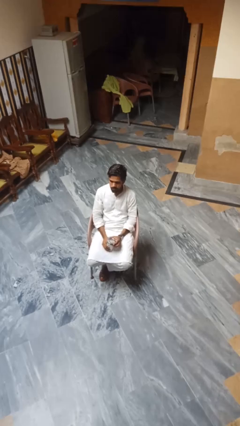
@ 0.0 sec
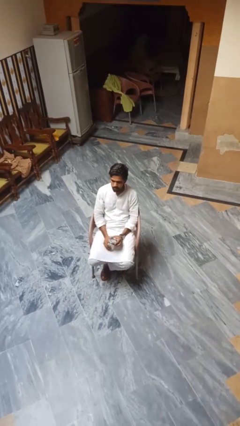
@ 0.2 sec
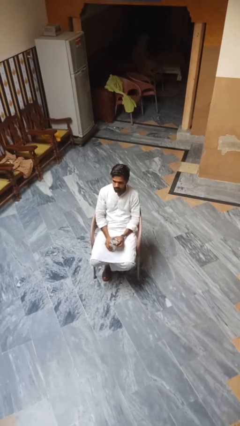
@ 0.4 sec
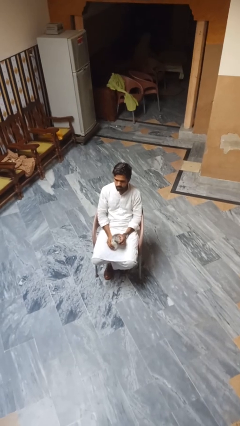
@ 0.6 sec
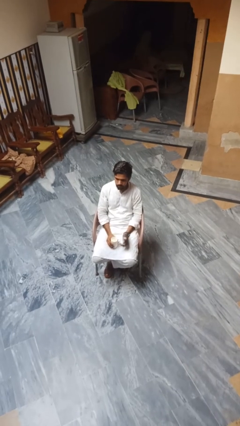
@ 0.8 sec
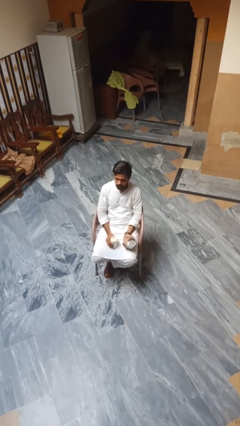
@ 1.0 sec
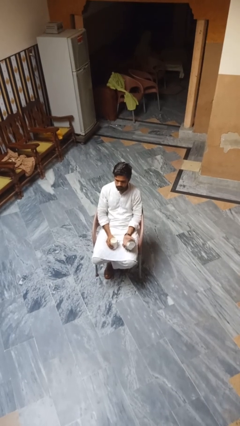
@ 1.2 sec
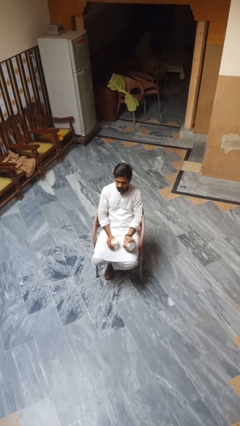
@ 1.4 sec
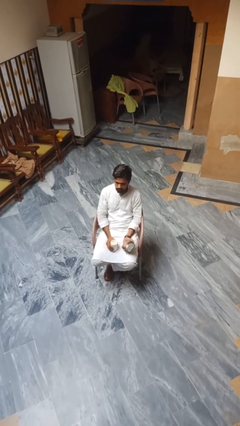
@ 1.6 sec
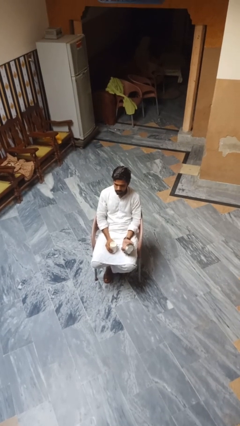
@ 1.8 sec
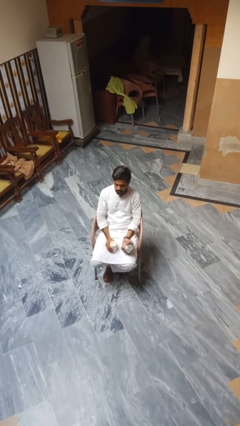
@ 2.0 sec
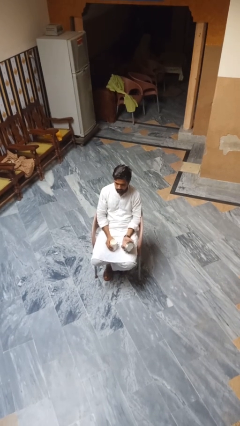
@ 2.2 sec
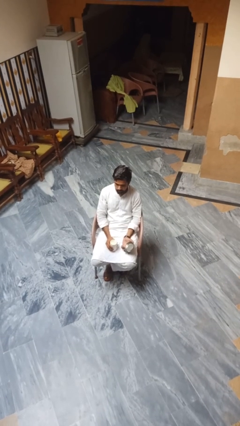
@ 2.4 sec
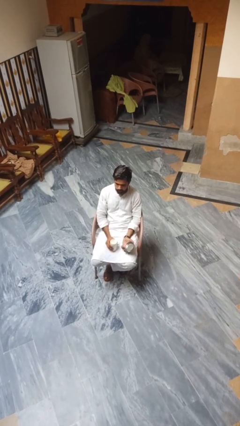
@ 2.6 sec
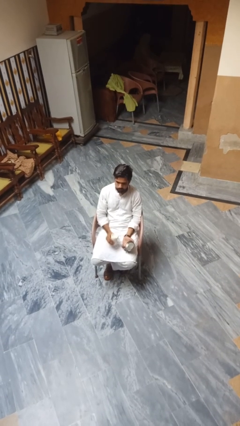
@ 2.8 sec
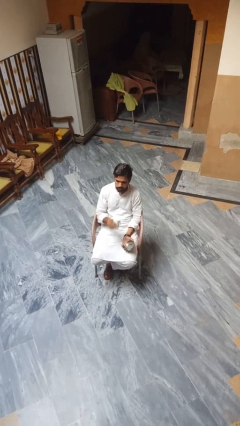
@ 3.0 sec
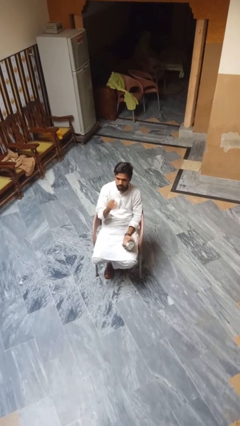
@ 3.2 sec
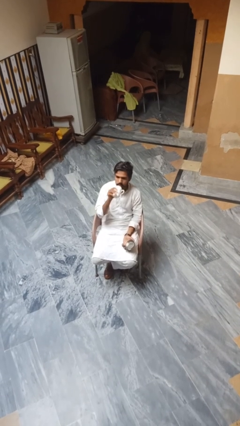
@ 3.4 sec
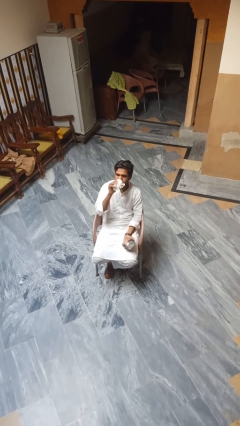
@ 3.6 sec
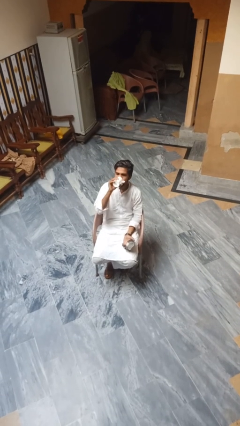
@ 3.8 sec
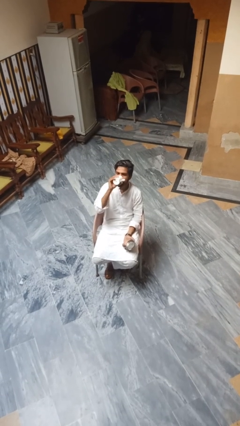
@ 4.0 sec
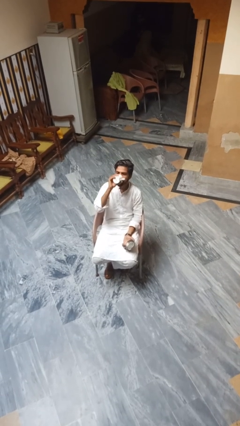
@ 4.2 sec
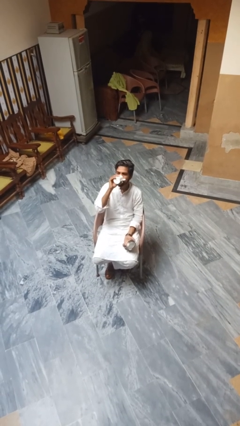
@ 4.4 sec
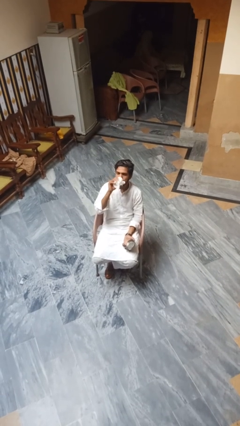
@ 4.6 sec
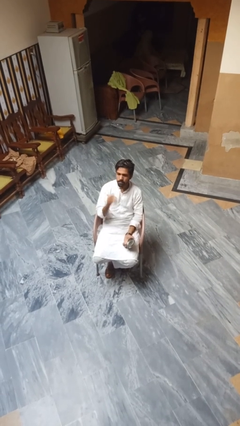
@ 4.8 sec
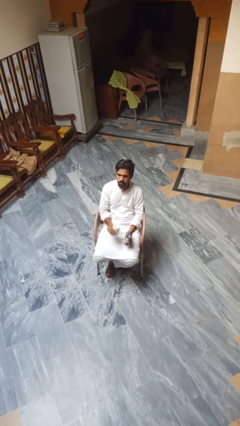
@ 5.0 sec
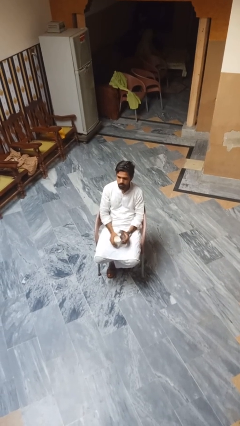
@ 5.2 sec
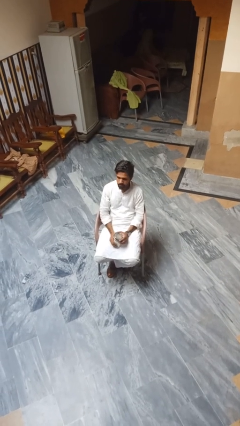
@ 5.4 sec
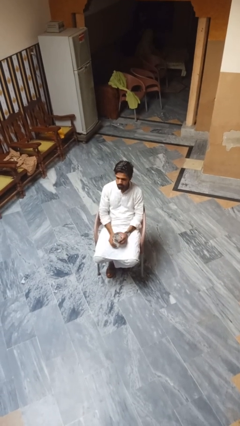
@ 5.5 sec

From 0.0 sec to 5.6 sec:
person opens beverage can

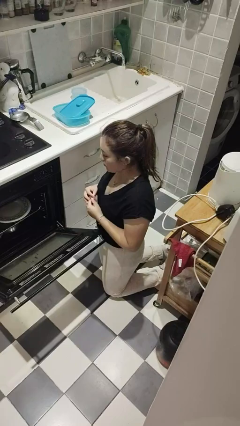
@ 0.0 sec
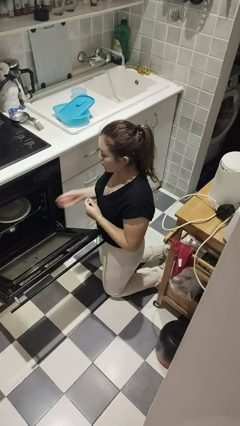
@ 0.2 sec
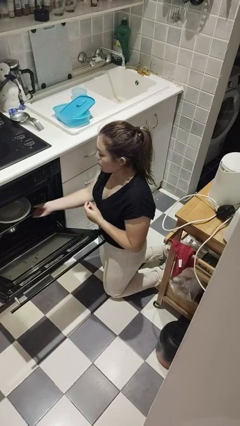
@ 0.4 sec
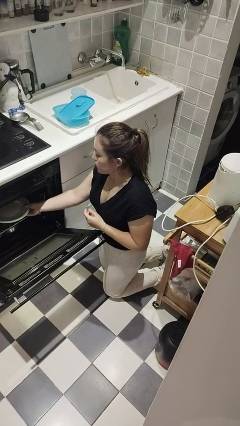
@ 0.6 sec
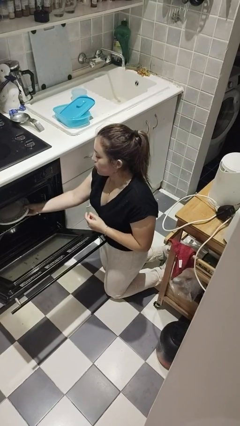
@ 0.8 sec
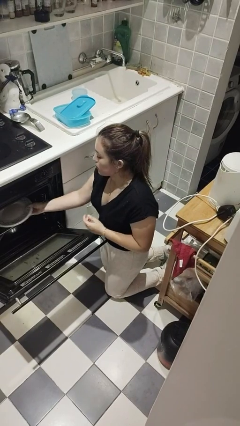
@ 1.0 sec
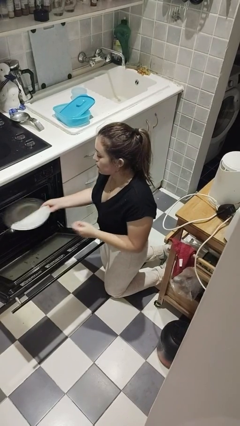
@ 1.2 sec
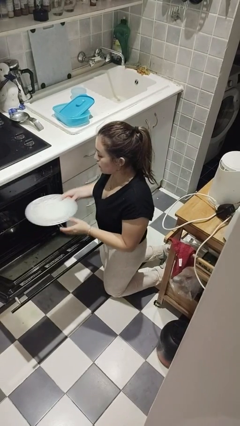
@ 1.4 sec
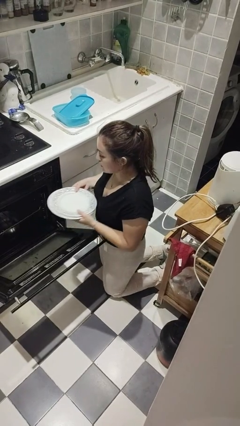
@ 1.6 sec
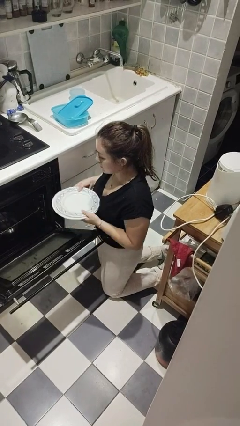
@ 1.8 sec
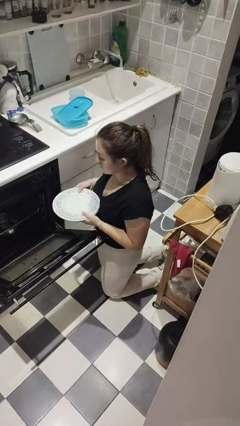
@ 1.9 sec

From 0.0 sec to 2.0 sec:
person unloads dishwasher

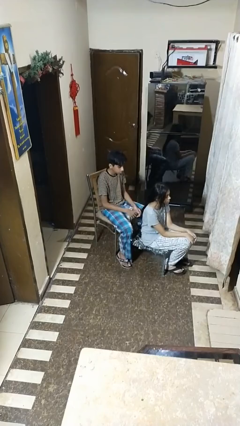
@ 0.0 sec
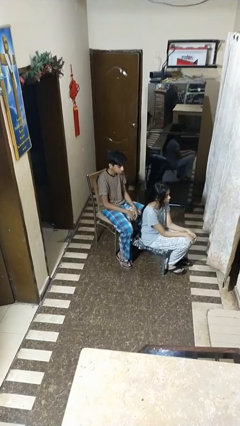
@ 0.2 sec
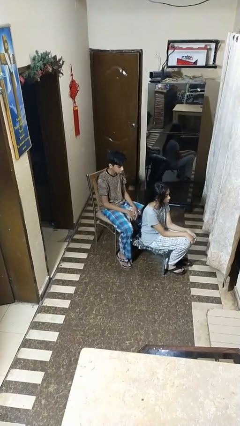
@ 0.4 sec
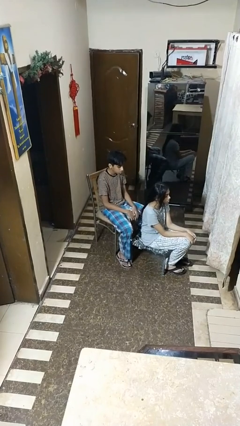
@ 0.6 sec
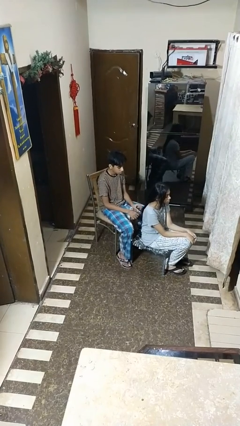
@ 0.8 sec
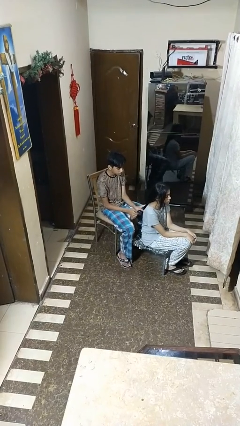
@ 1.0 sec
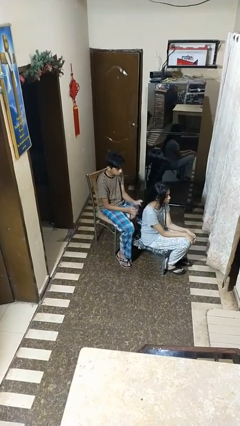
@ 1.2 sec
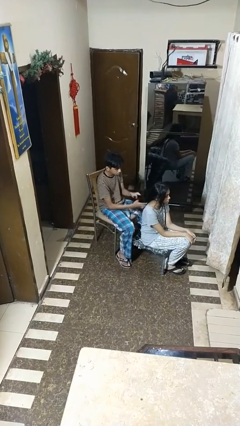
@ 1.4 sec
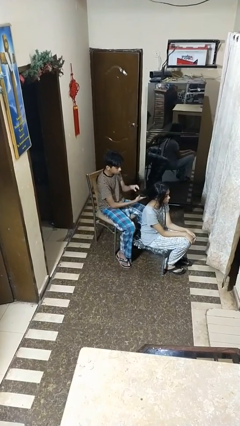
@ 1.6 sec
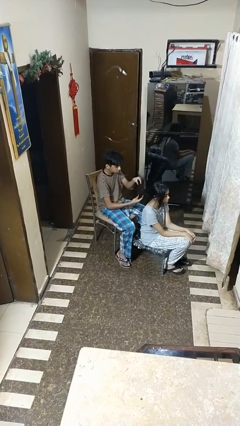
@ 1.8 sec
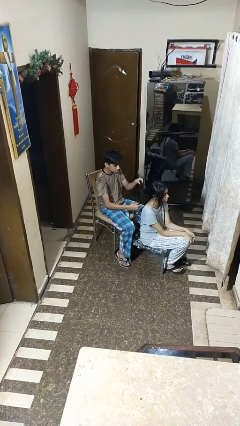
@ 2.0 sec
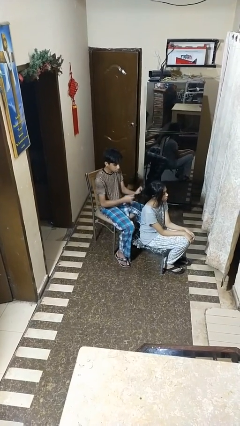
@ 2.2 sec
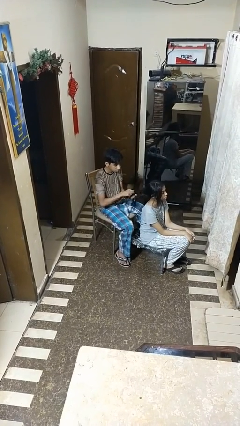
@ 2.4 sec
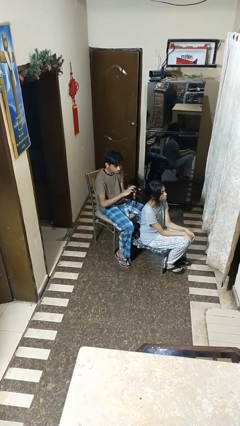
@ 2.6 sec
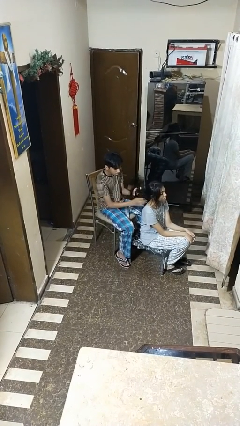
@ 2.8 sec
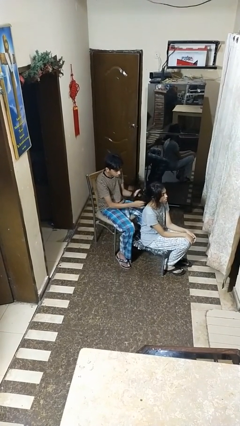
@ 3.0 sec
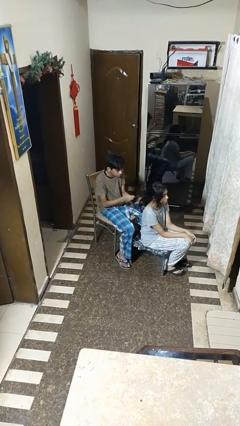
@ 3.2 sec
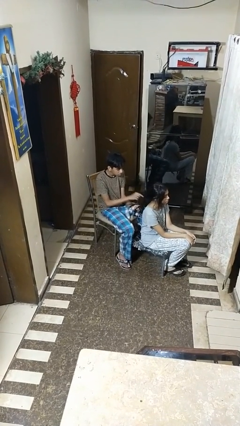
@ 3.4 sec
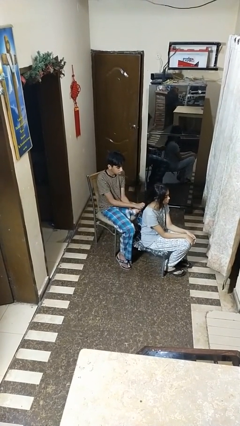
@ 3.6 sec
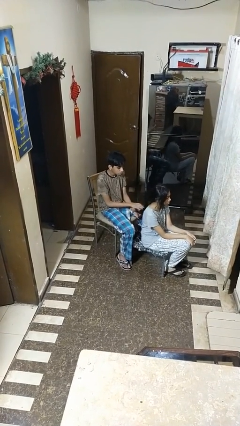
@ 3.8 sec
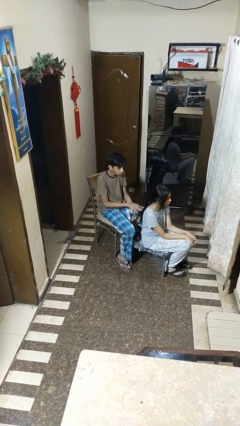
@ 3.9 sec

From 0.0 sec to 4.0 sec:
person braids hair of person

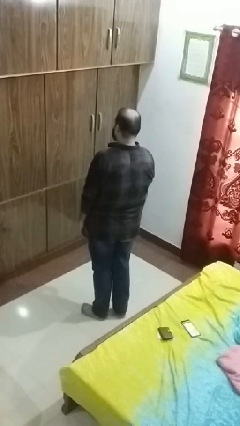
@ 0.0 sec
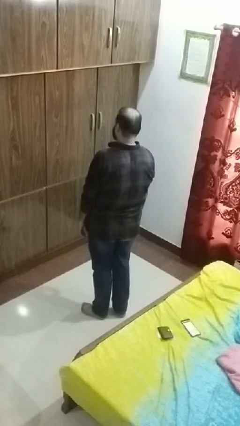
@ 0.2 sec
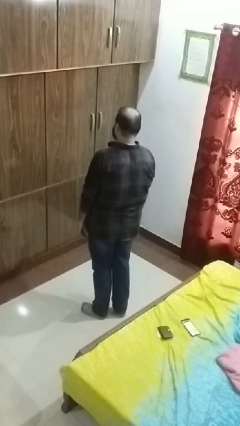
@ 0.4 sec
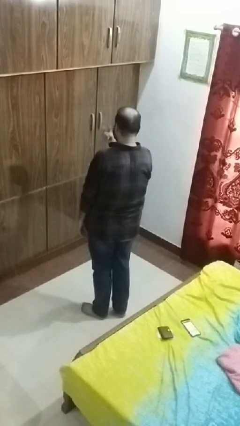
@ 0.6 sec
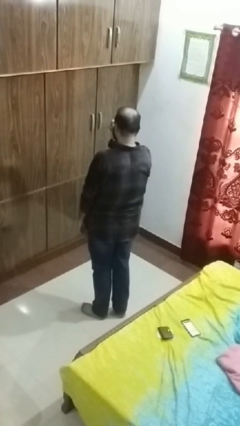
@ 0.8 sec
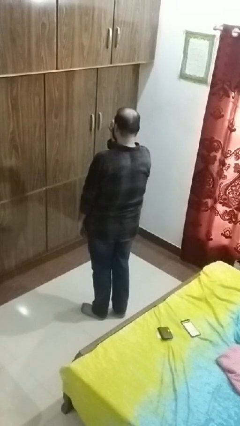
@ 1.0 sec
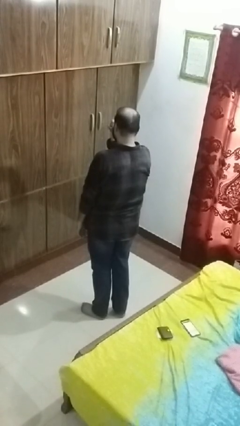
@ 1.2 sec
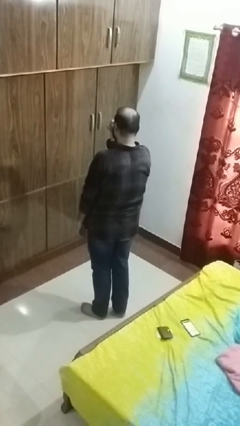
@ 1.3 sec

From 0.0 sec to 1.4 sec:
person gestures watch closely

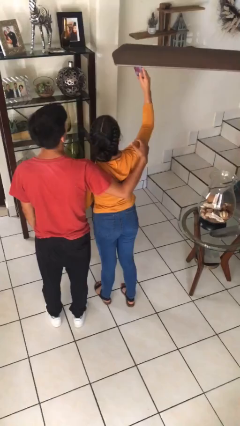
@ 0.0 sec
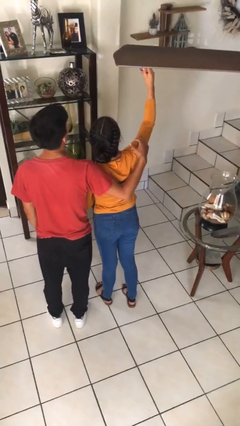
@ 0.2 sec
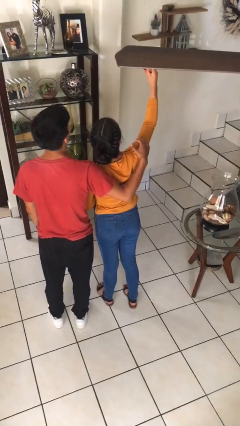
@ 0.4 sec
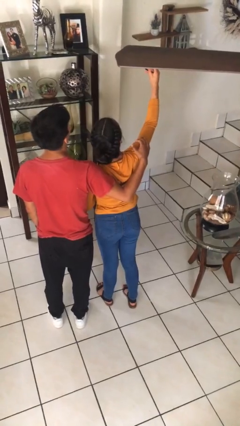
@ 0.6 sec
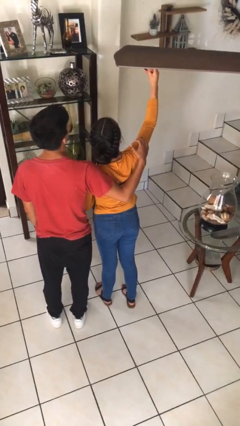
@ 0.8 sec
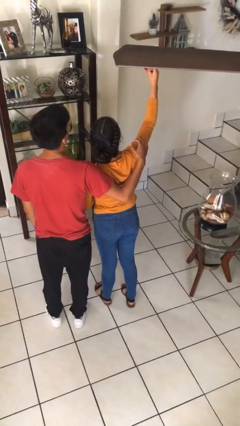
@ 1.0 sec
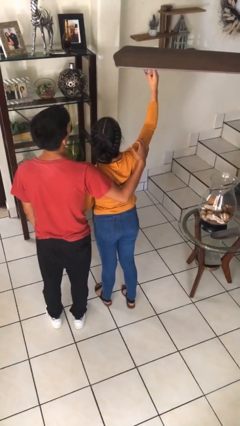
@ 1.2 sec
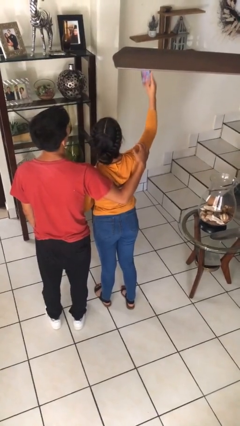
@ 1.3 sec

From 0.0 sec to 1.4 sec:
person takes selfie with person

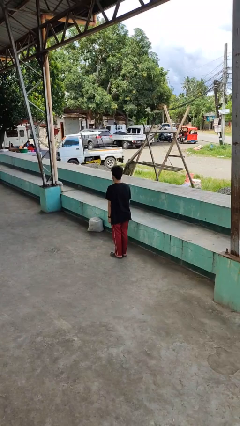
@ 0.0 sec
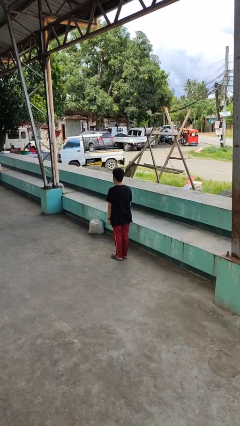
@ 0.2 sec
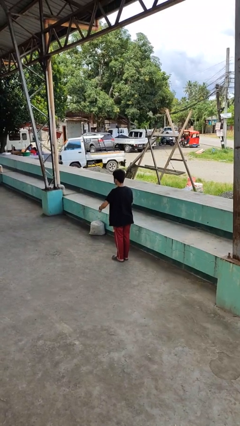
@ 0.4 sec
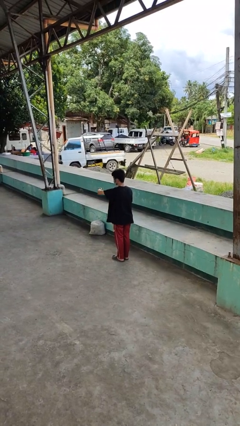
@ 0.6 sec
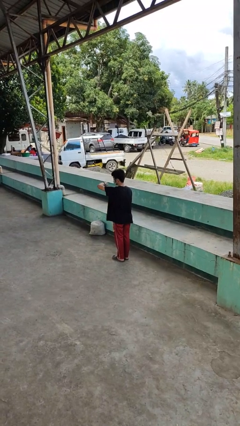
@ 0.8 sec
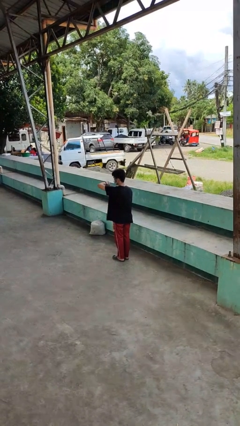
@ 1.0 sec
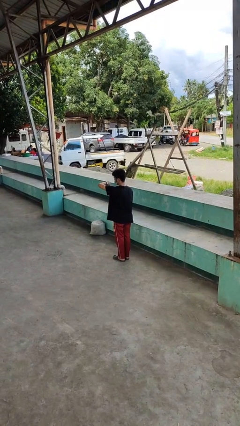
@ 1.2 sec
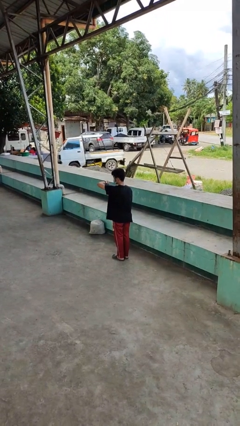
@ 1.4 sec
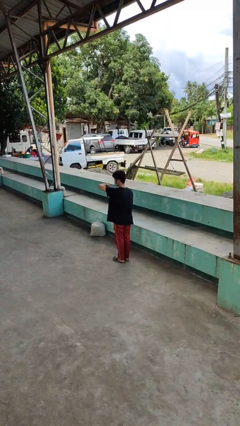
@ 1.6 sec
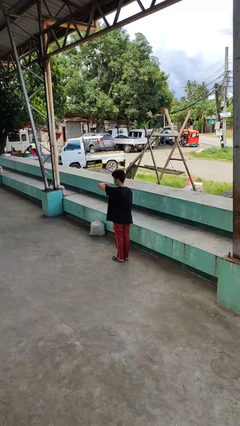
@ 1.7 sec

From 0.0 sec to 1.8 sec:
person looks at wristwatch

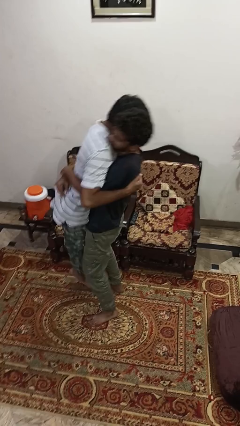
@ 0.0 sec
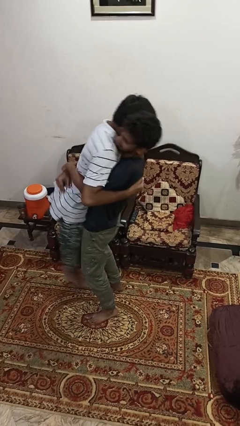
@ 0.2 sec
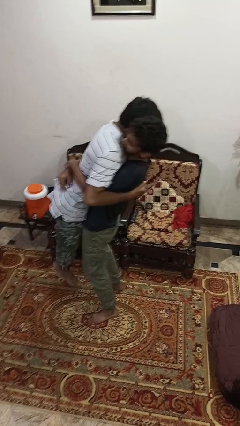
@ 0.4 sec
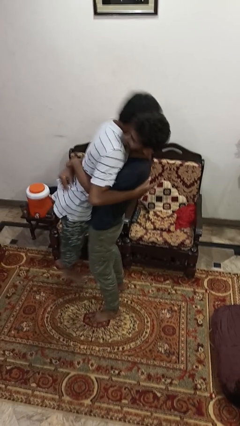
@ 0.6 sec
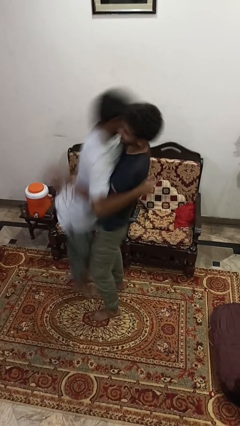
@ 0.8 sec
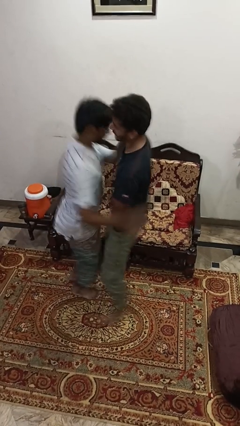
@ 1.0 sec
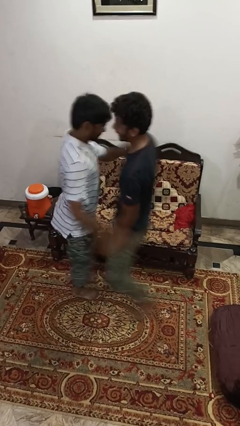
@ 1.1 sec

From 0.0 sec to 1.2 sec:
person puts down person
